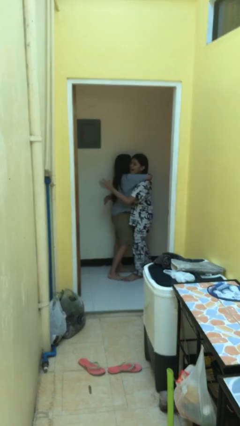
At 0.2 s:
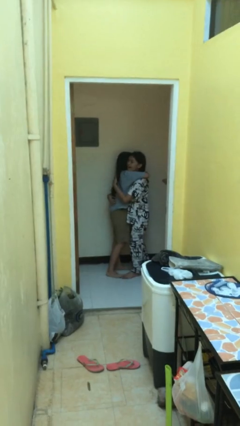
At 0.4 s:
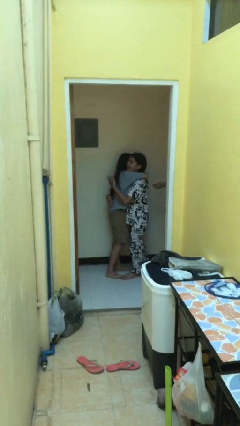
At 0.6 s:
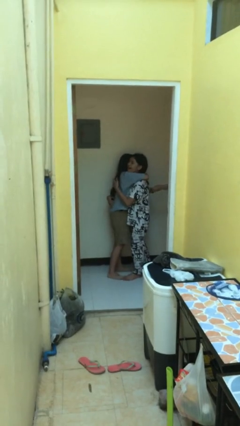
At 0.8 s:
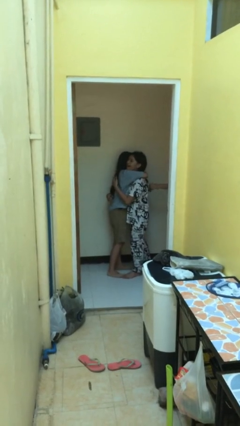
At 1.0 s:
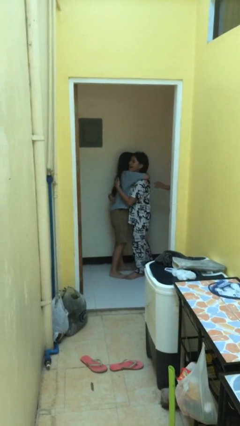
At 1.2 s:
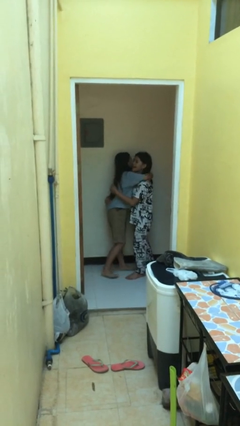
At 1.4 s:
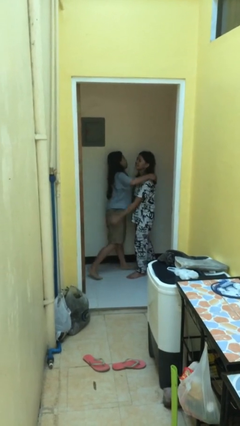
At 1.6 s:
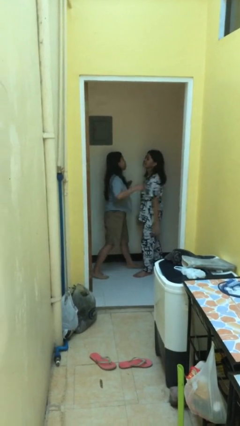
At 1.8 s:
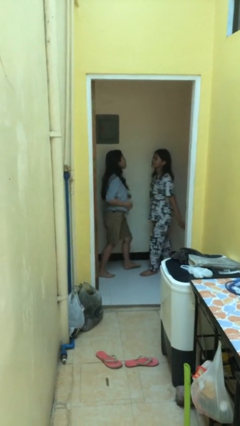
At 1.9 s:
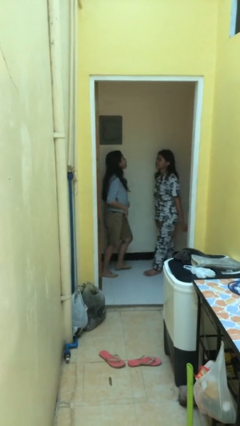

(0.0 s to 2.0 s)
person embraces person

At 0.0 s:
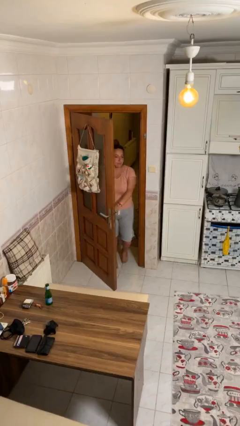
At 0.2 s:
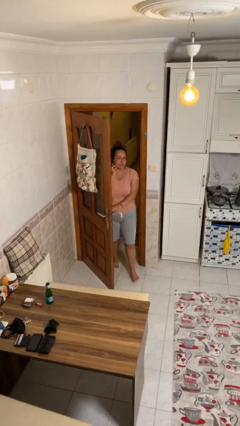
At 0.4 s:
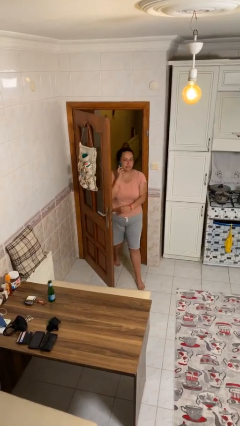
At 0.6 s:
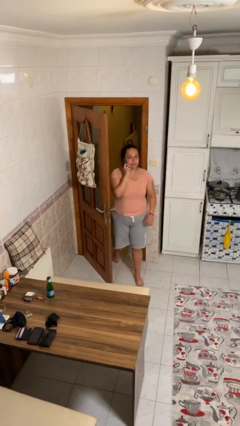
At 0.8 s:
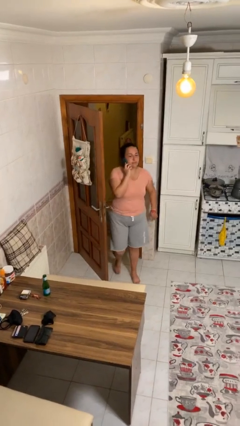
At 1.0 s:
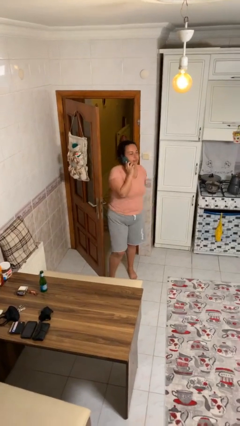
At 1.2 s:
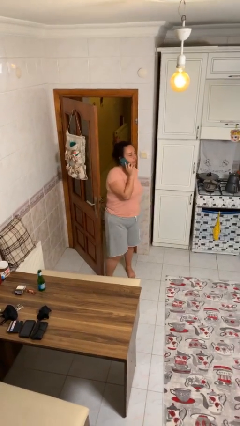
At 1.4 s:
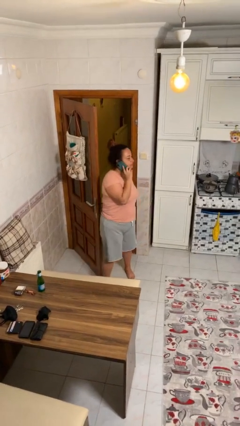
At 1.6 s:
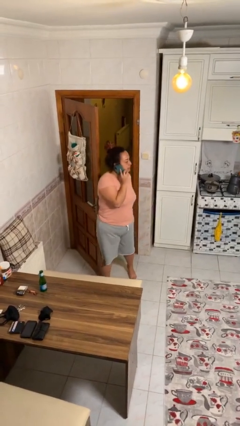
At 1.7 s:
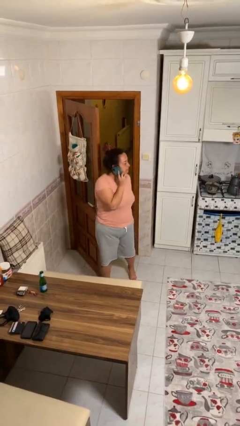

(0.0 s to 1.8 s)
person enters scene through structure

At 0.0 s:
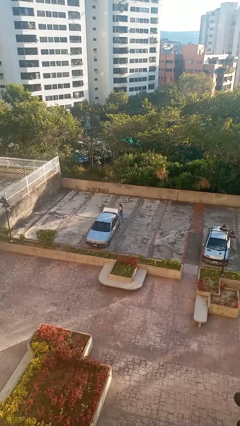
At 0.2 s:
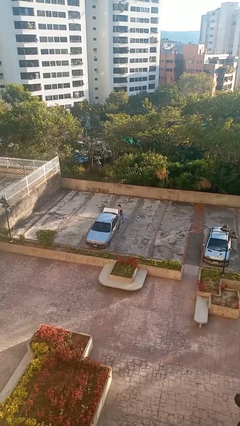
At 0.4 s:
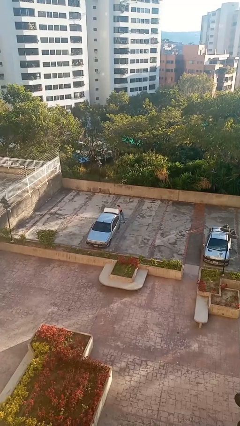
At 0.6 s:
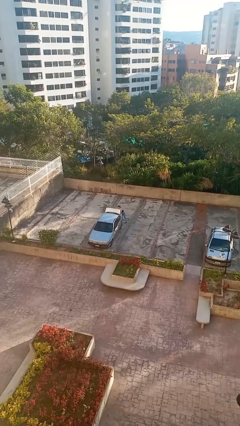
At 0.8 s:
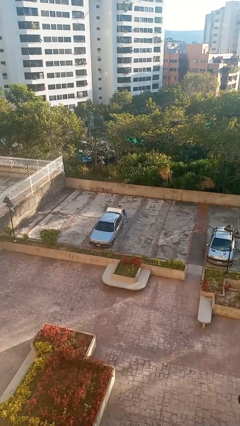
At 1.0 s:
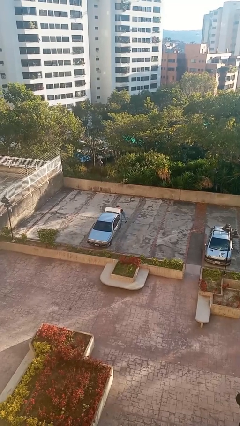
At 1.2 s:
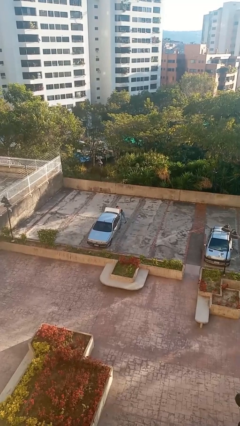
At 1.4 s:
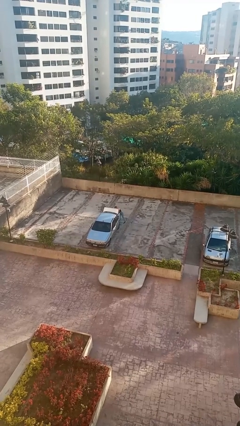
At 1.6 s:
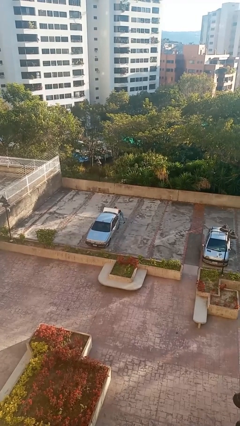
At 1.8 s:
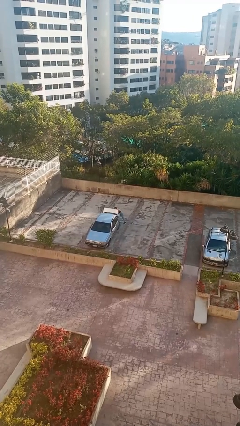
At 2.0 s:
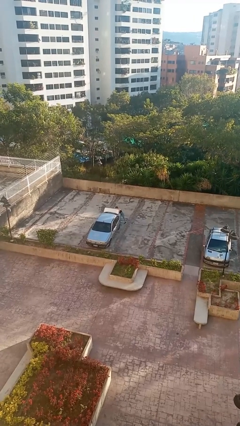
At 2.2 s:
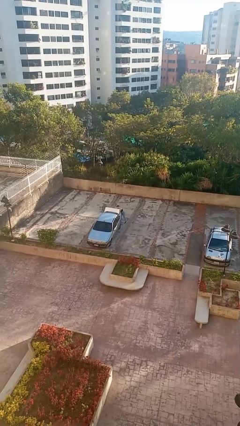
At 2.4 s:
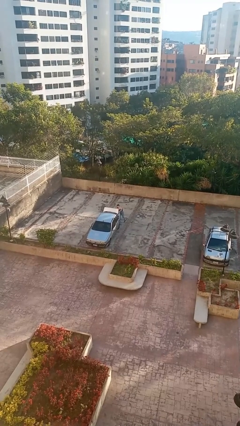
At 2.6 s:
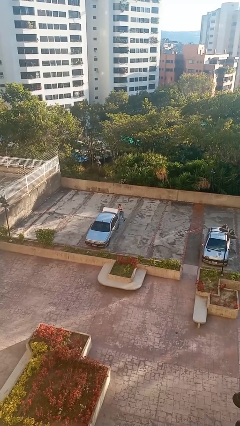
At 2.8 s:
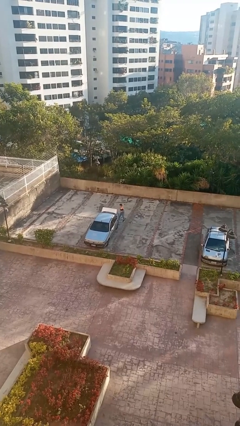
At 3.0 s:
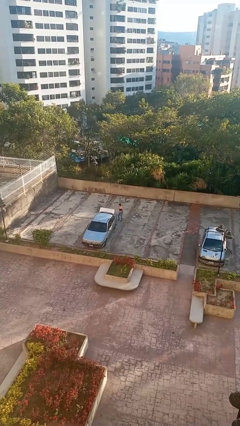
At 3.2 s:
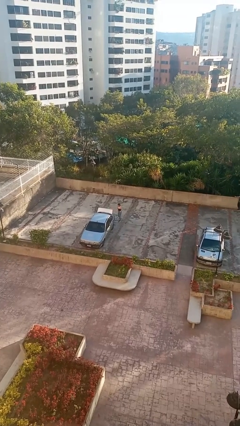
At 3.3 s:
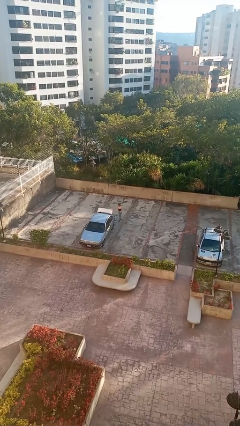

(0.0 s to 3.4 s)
person loads car

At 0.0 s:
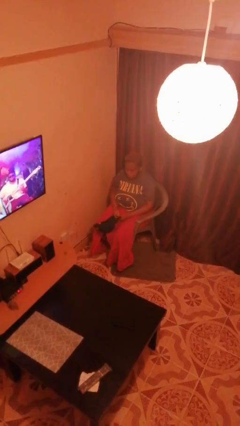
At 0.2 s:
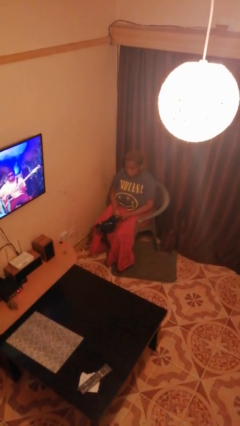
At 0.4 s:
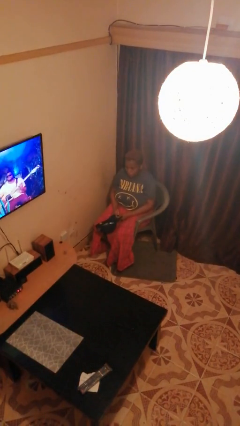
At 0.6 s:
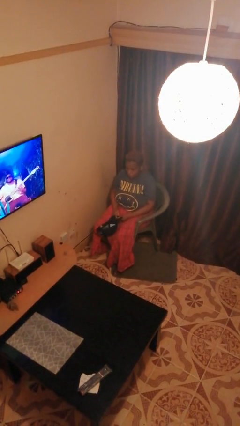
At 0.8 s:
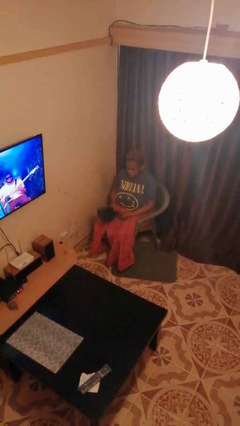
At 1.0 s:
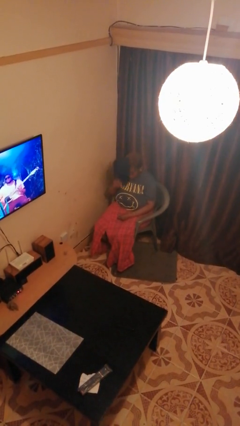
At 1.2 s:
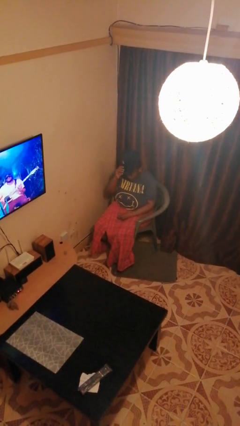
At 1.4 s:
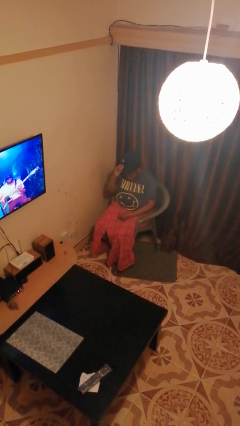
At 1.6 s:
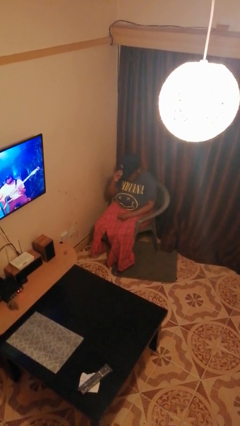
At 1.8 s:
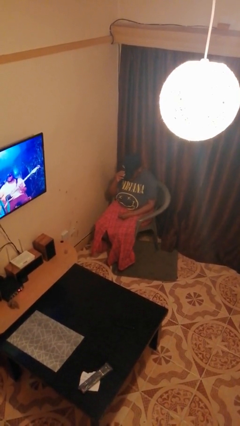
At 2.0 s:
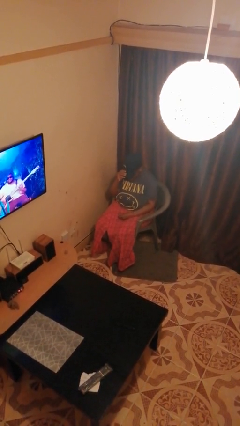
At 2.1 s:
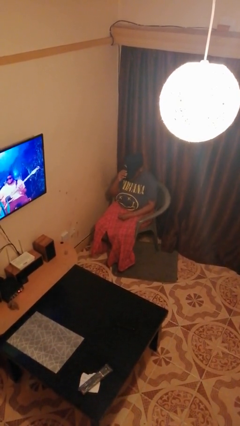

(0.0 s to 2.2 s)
person puts on hat

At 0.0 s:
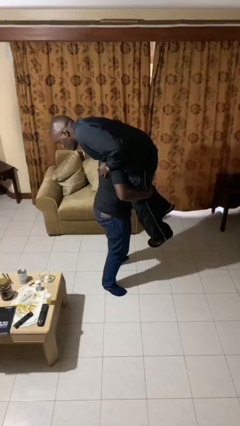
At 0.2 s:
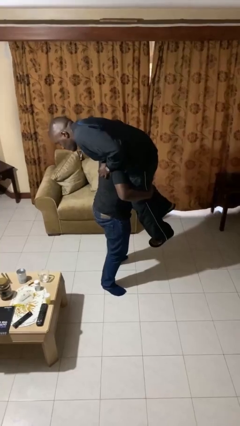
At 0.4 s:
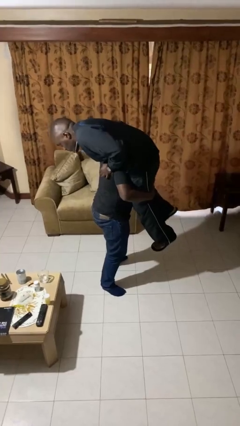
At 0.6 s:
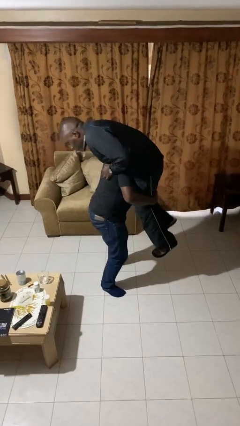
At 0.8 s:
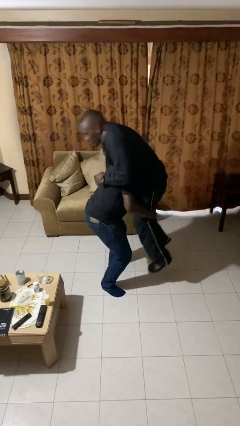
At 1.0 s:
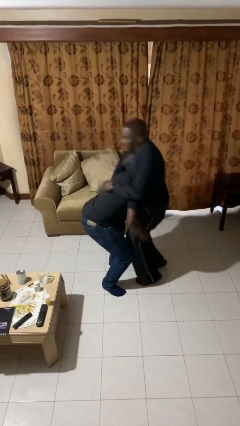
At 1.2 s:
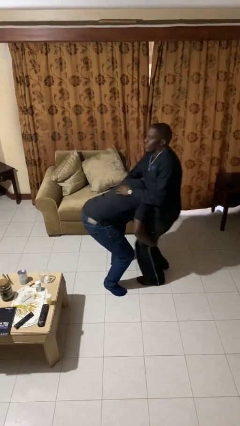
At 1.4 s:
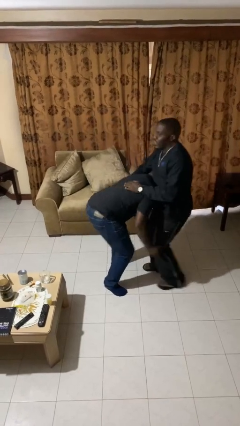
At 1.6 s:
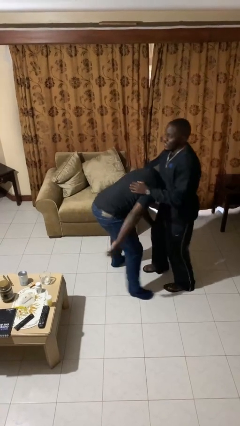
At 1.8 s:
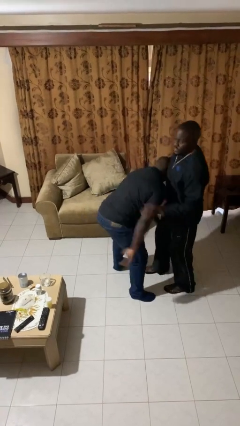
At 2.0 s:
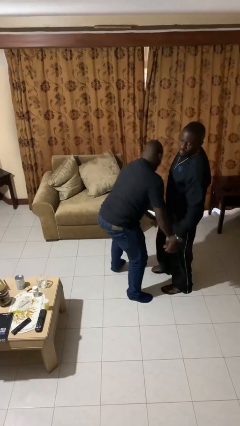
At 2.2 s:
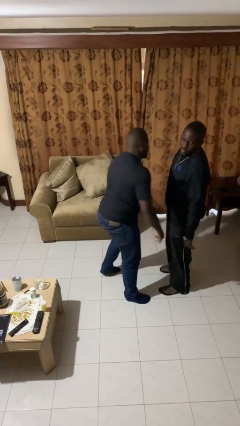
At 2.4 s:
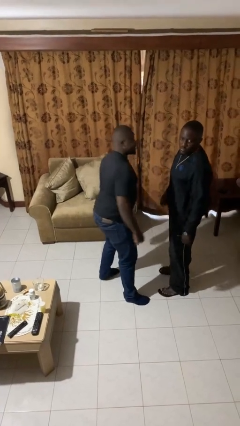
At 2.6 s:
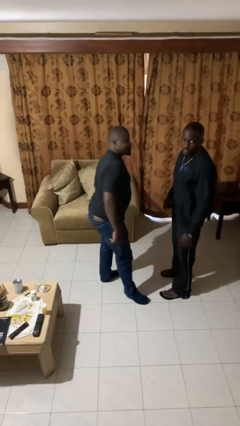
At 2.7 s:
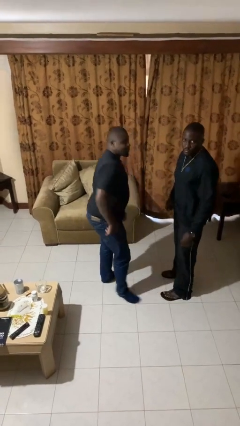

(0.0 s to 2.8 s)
person puts down person

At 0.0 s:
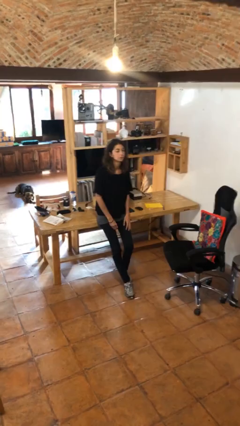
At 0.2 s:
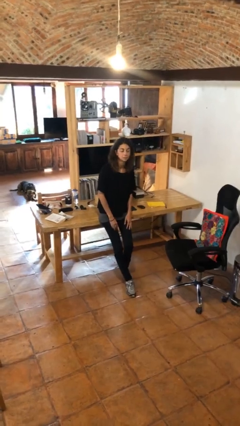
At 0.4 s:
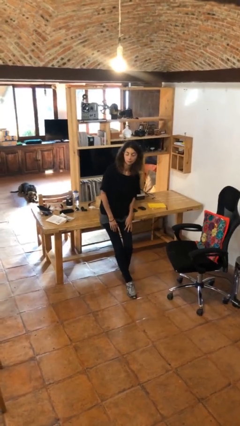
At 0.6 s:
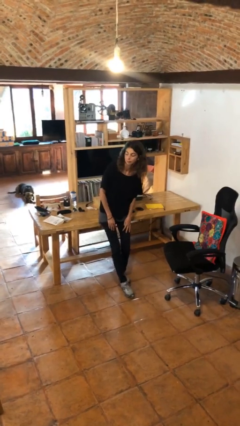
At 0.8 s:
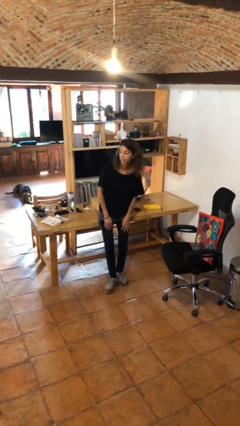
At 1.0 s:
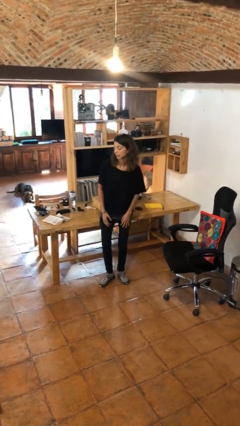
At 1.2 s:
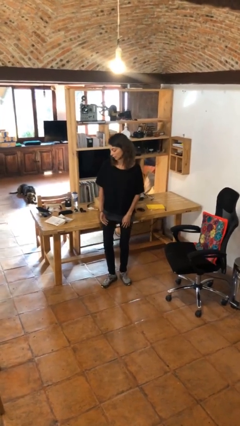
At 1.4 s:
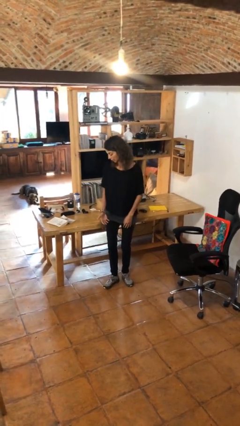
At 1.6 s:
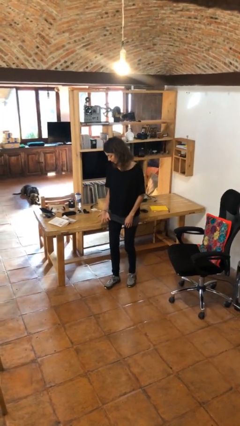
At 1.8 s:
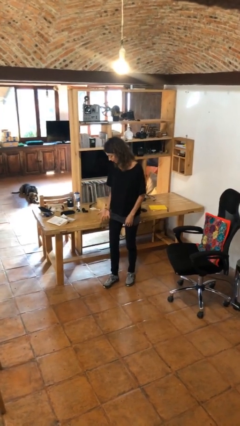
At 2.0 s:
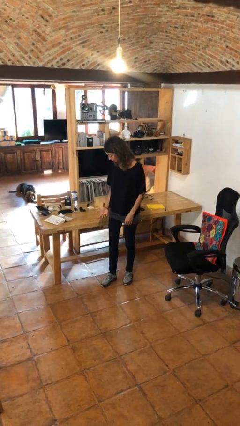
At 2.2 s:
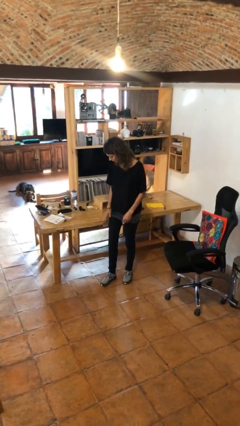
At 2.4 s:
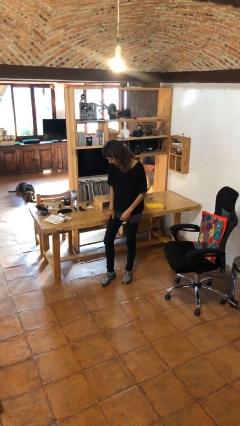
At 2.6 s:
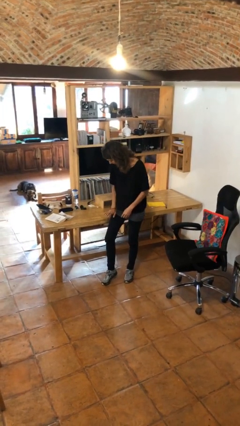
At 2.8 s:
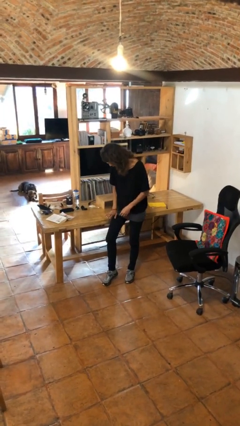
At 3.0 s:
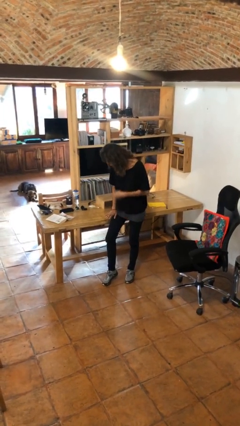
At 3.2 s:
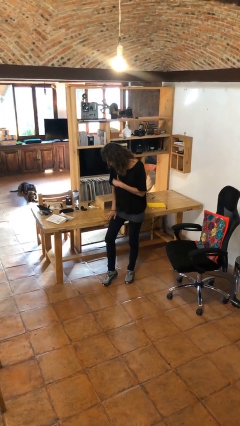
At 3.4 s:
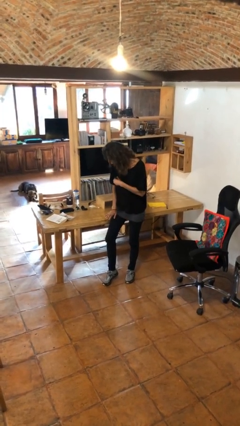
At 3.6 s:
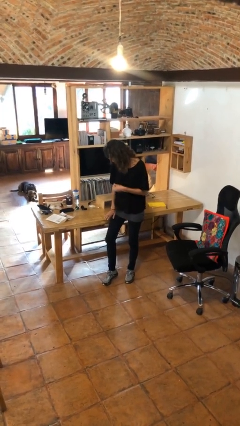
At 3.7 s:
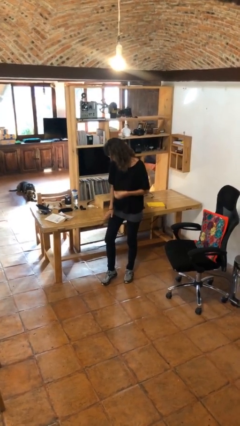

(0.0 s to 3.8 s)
person looks at hands in lap

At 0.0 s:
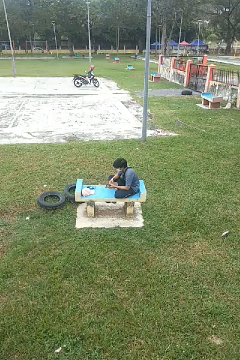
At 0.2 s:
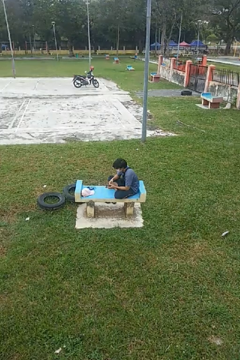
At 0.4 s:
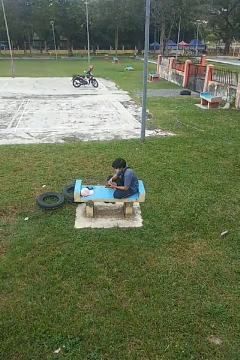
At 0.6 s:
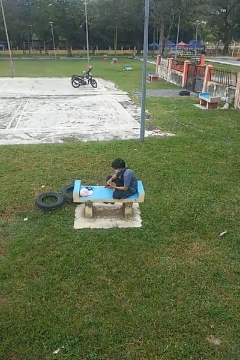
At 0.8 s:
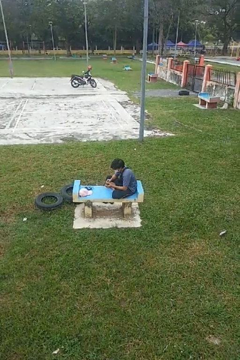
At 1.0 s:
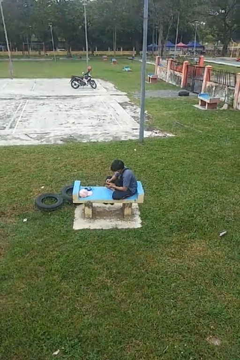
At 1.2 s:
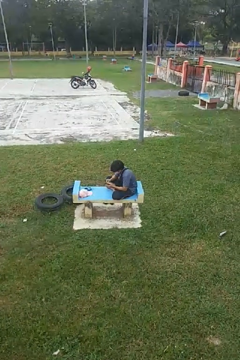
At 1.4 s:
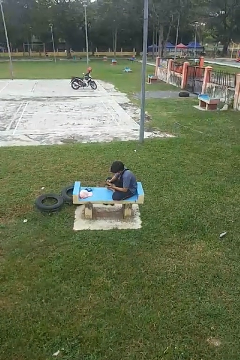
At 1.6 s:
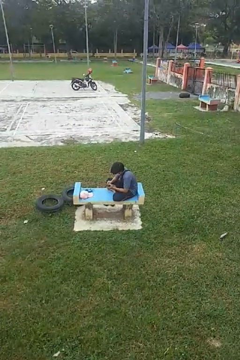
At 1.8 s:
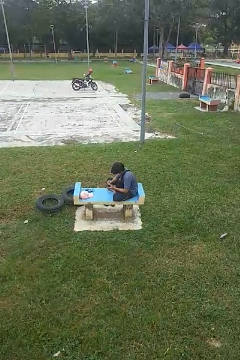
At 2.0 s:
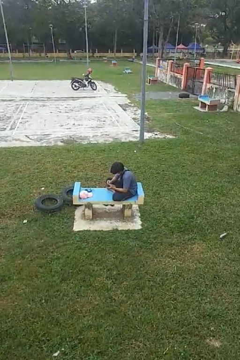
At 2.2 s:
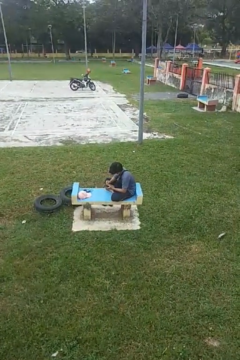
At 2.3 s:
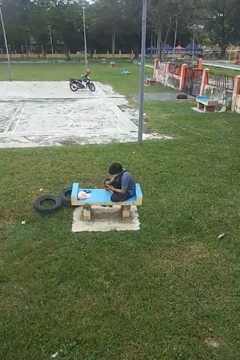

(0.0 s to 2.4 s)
person searches in purse
